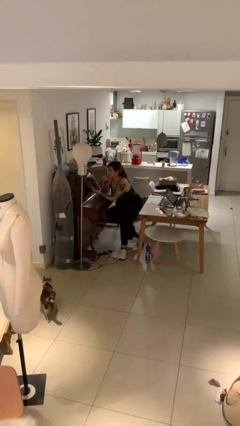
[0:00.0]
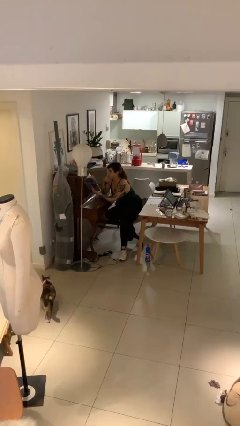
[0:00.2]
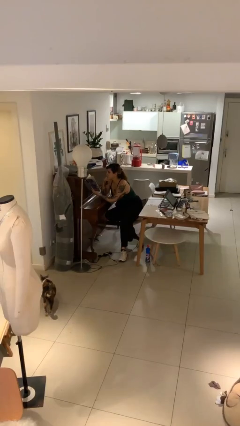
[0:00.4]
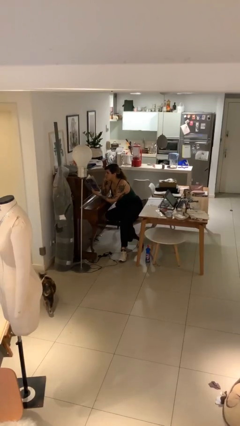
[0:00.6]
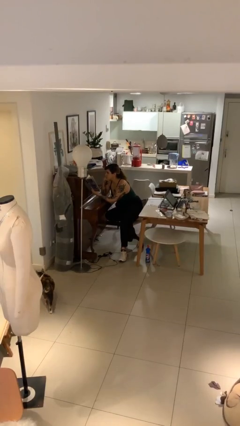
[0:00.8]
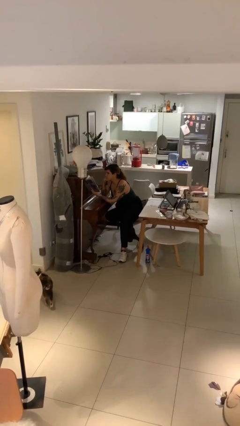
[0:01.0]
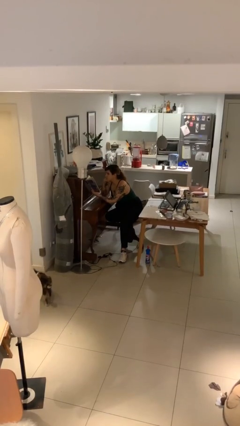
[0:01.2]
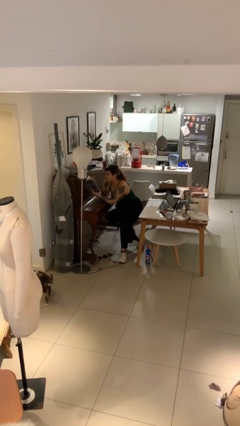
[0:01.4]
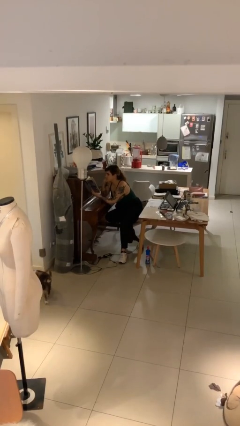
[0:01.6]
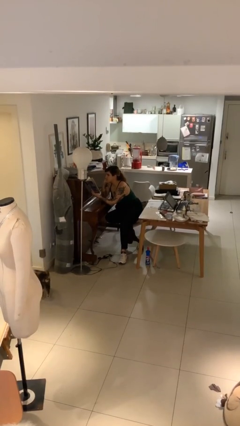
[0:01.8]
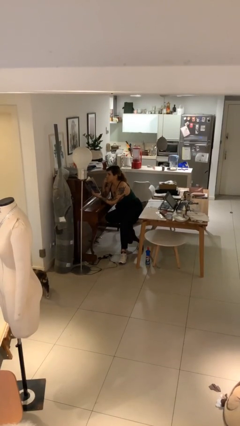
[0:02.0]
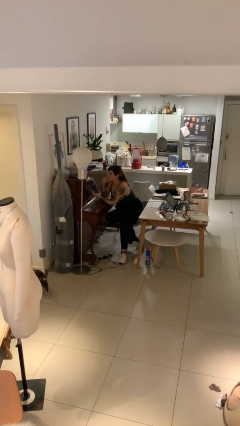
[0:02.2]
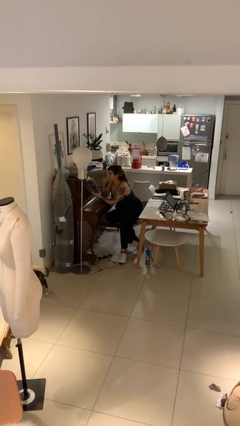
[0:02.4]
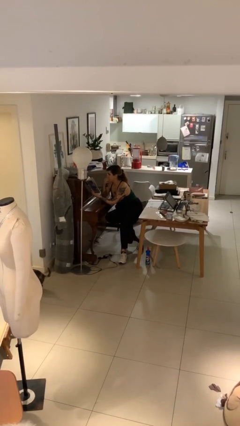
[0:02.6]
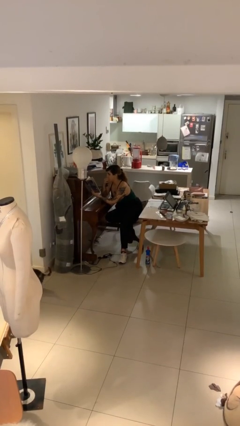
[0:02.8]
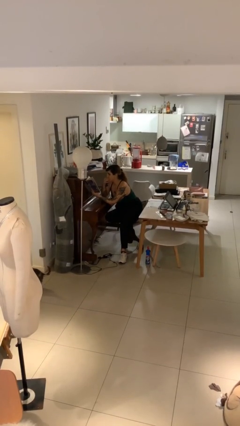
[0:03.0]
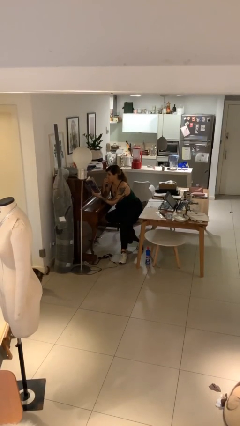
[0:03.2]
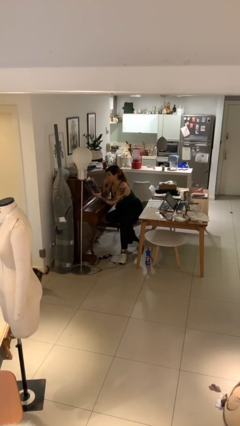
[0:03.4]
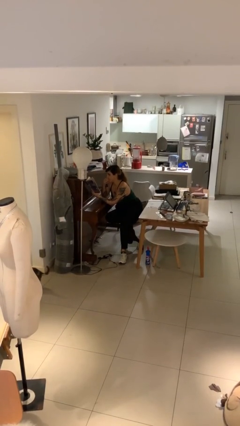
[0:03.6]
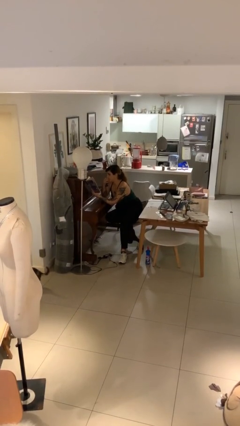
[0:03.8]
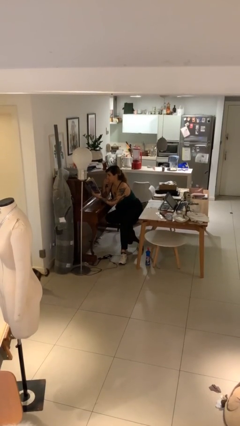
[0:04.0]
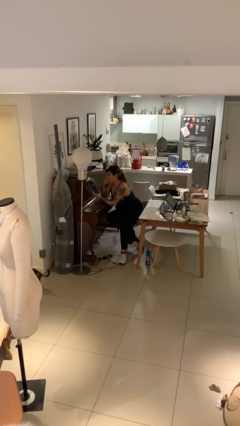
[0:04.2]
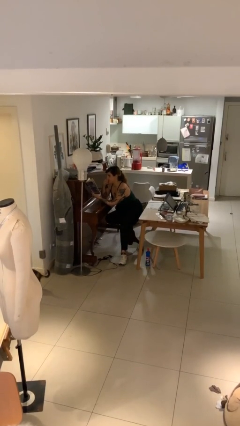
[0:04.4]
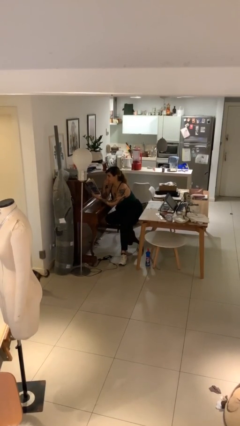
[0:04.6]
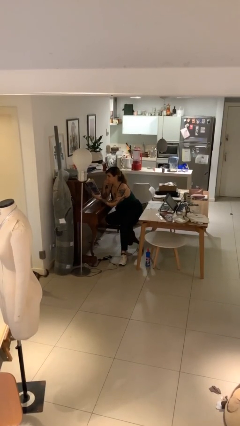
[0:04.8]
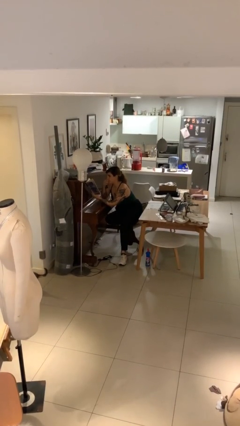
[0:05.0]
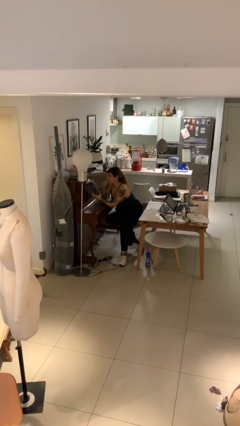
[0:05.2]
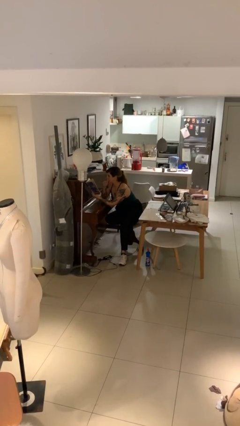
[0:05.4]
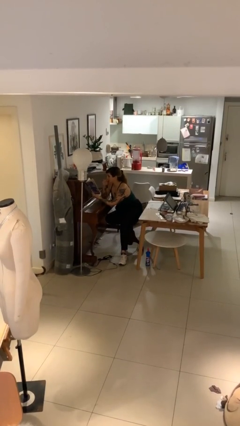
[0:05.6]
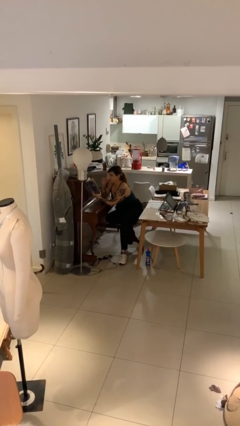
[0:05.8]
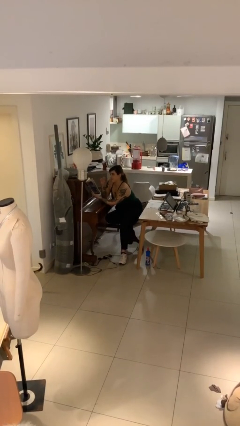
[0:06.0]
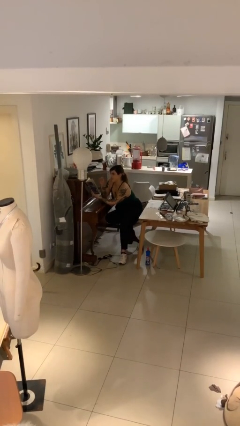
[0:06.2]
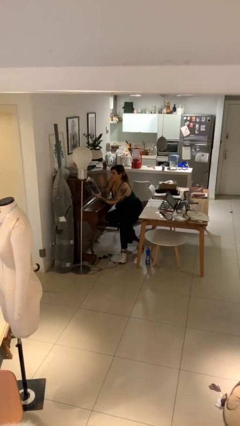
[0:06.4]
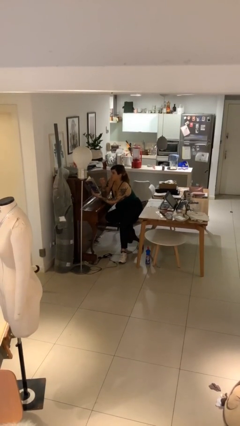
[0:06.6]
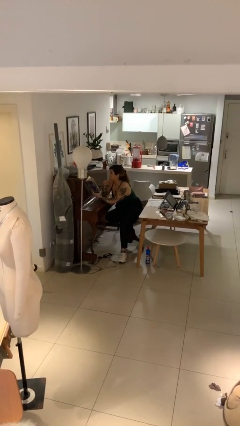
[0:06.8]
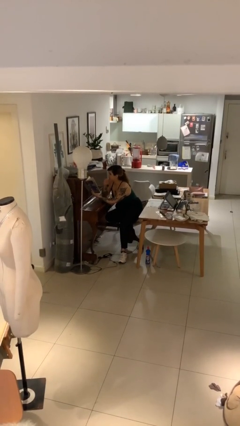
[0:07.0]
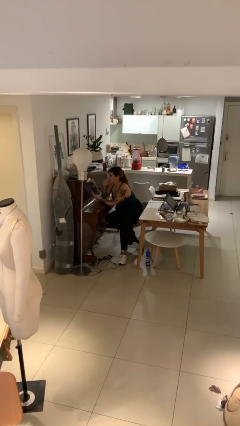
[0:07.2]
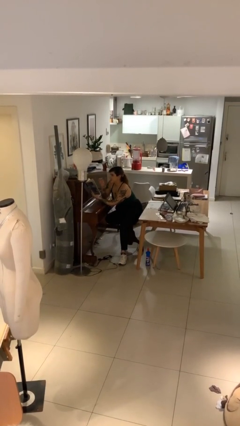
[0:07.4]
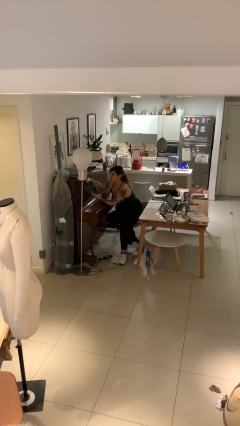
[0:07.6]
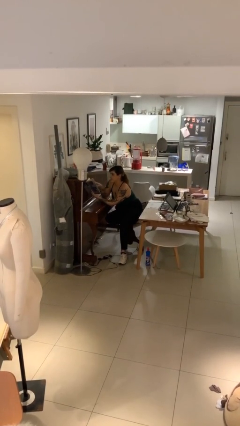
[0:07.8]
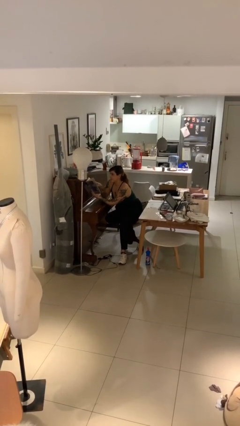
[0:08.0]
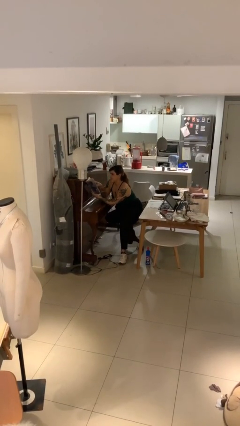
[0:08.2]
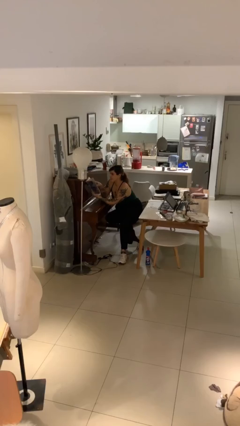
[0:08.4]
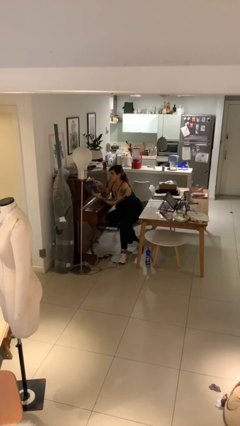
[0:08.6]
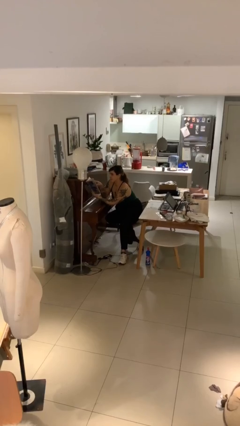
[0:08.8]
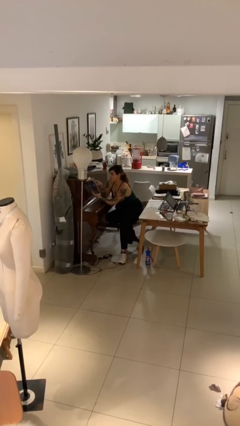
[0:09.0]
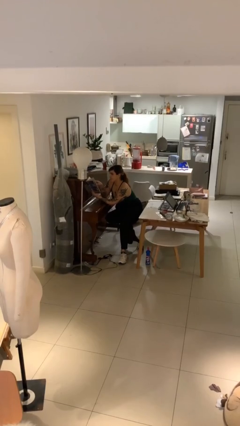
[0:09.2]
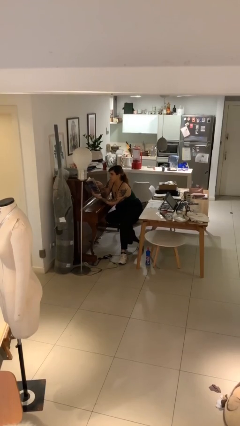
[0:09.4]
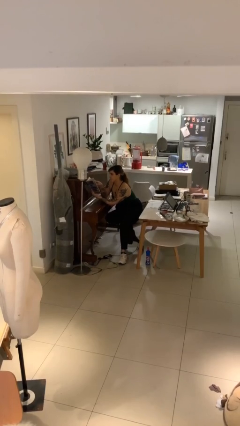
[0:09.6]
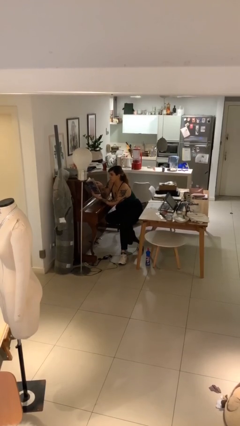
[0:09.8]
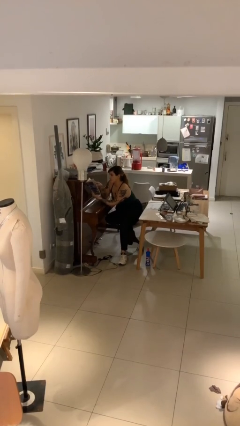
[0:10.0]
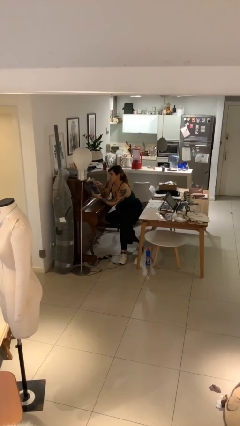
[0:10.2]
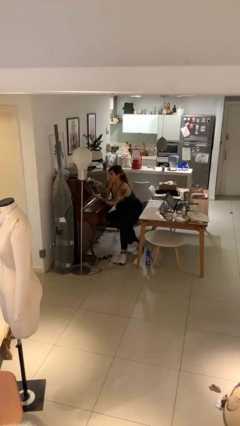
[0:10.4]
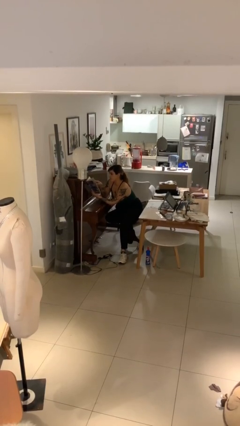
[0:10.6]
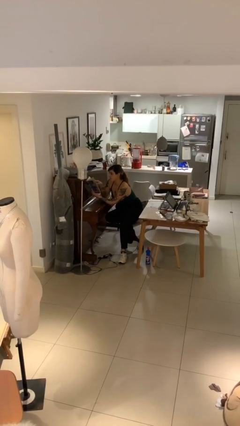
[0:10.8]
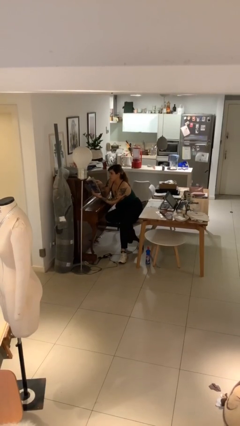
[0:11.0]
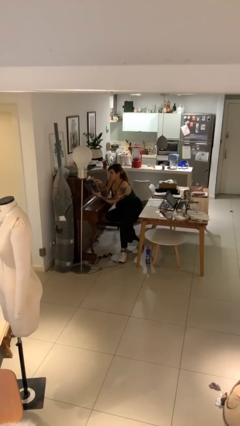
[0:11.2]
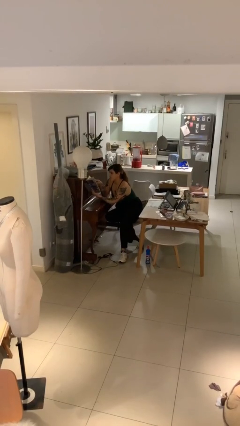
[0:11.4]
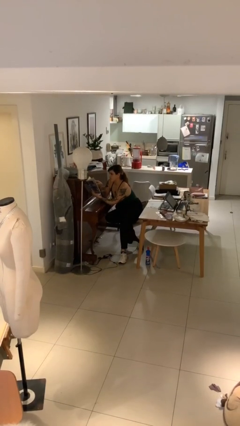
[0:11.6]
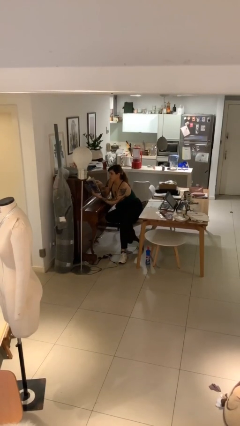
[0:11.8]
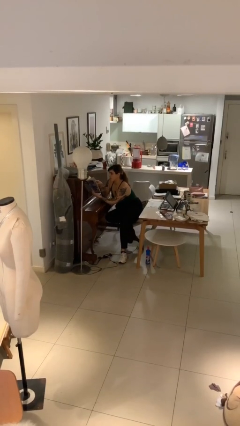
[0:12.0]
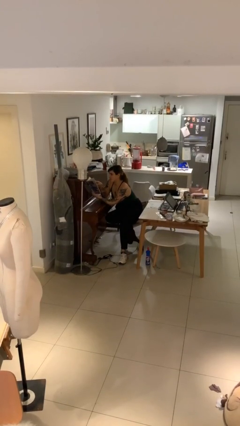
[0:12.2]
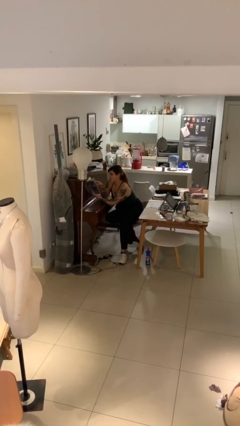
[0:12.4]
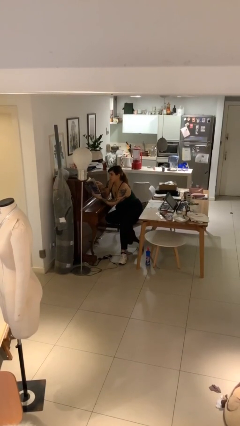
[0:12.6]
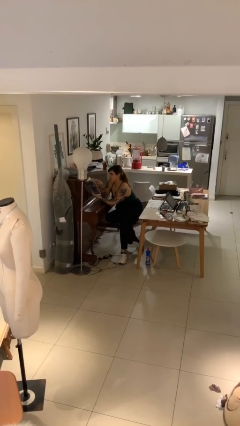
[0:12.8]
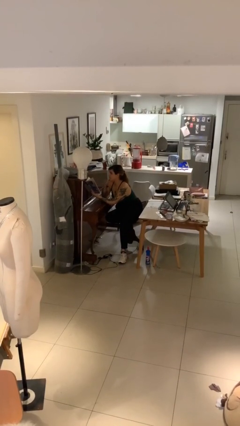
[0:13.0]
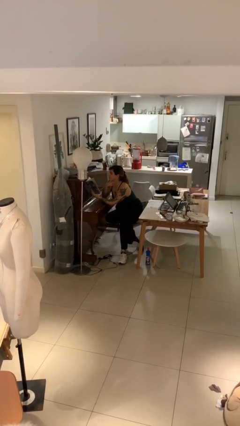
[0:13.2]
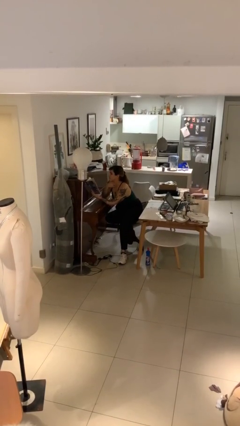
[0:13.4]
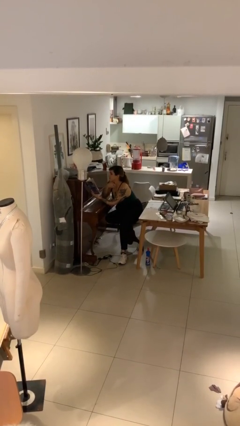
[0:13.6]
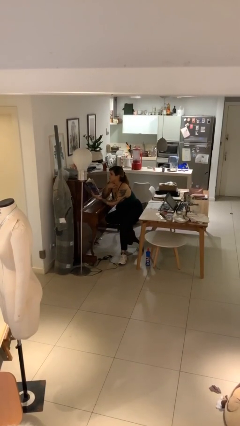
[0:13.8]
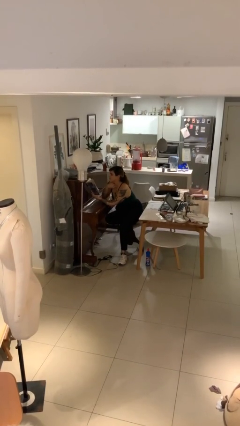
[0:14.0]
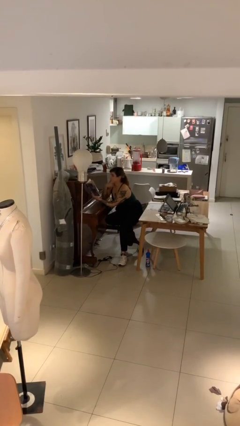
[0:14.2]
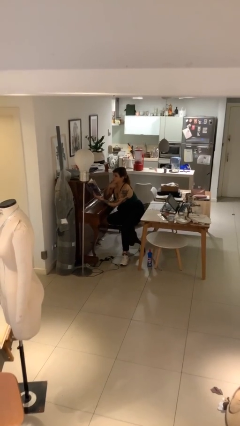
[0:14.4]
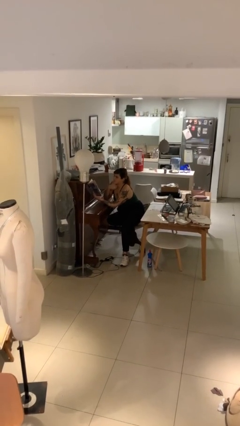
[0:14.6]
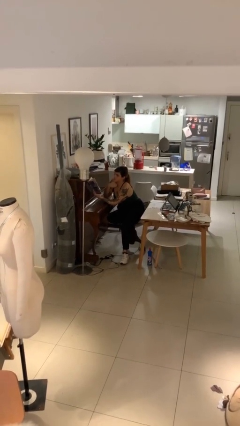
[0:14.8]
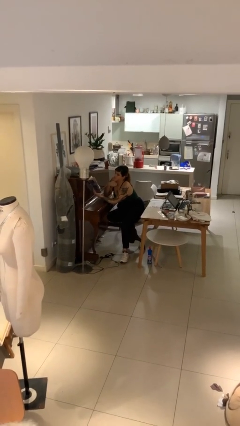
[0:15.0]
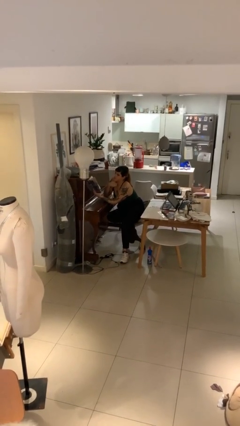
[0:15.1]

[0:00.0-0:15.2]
person reads document

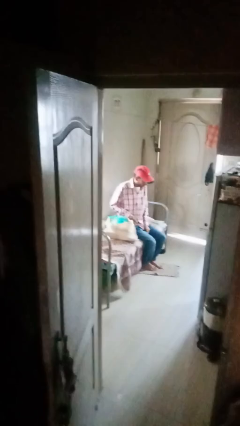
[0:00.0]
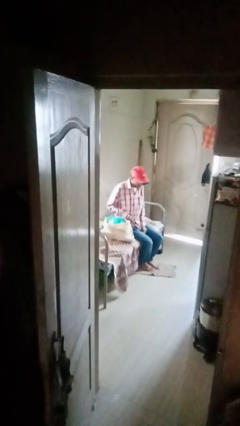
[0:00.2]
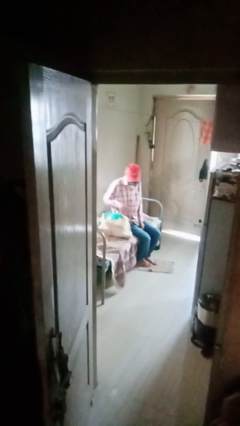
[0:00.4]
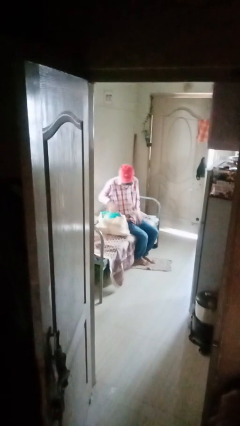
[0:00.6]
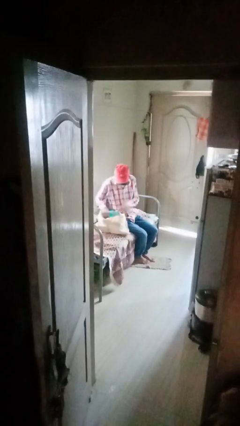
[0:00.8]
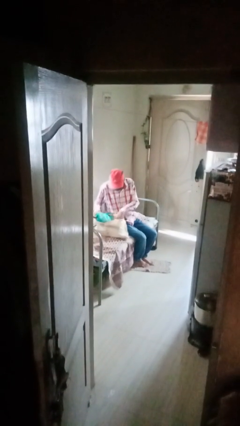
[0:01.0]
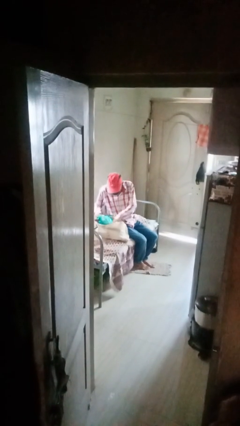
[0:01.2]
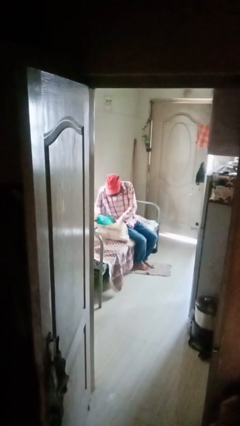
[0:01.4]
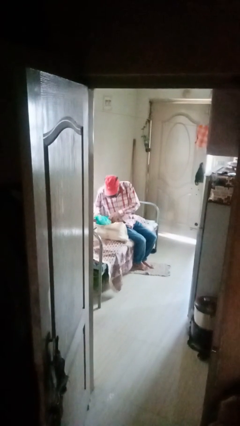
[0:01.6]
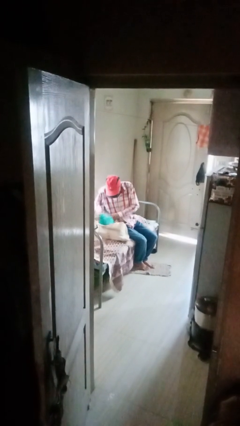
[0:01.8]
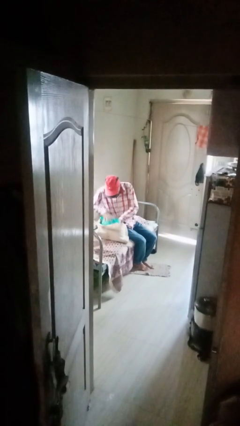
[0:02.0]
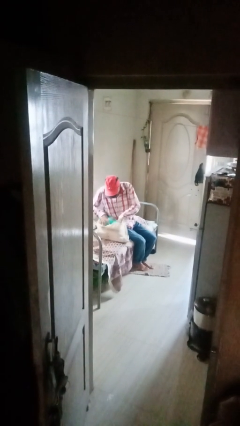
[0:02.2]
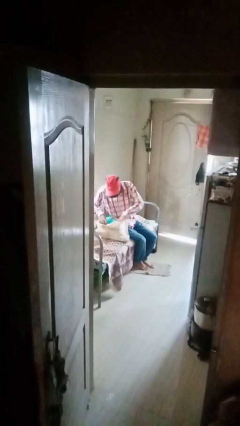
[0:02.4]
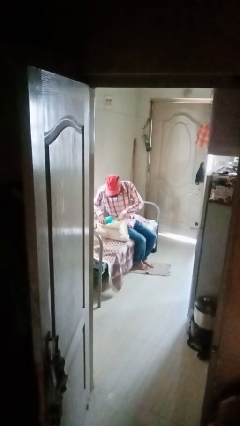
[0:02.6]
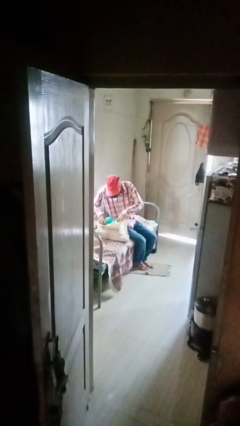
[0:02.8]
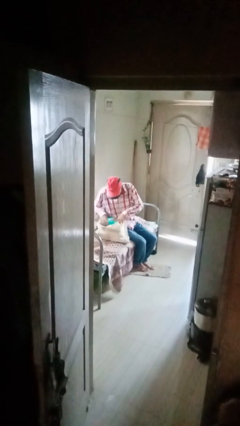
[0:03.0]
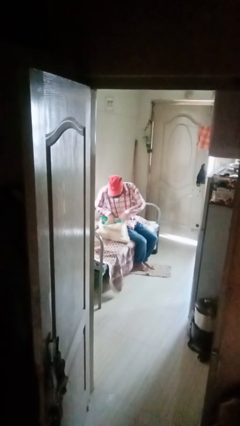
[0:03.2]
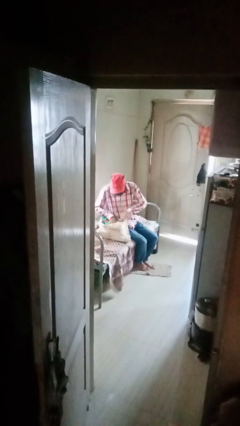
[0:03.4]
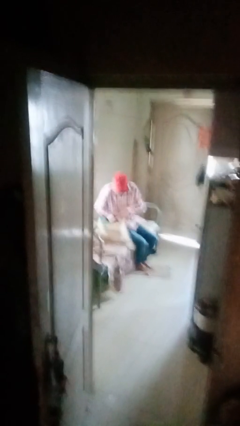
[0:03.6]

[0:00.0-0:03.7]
person searches in bag
